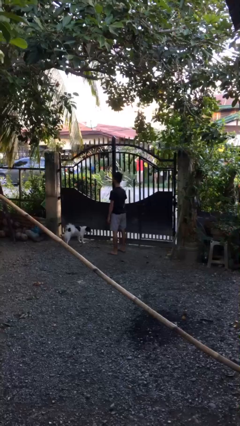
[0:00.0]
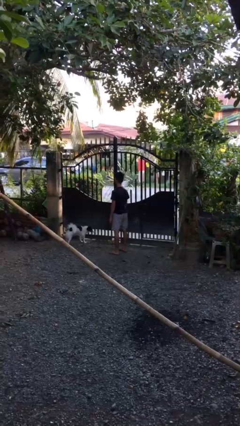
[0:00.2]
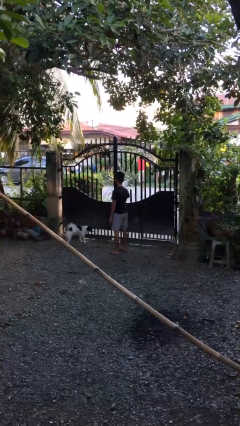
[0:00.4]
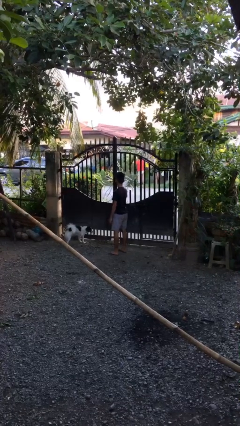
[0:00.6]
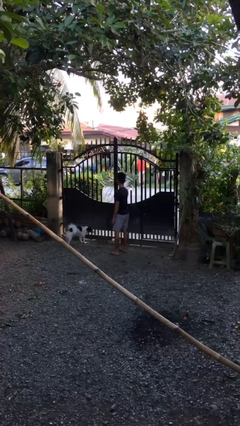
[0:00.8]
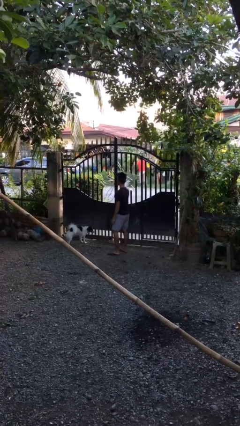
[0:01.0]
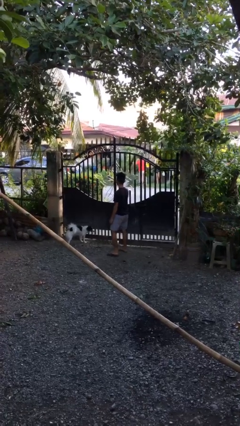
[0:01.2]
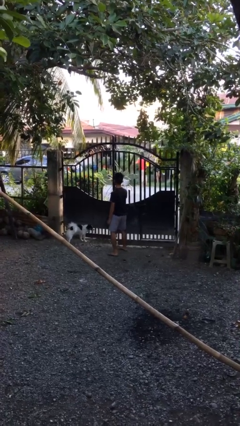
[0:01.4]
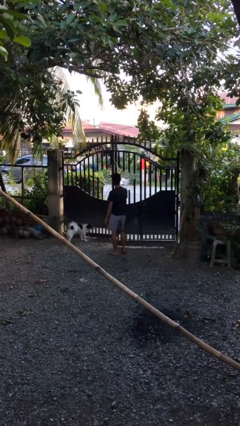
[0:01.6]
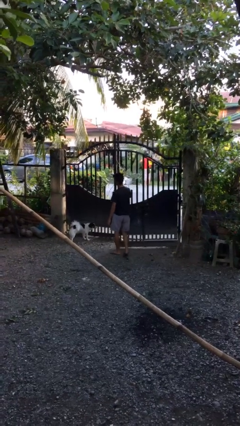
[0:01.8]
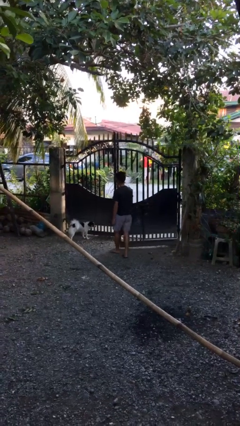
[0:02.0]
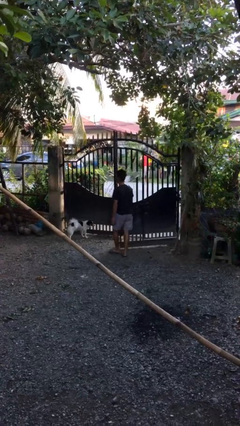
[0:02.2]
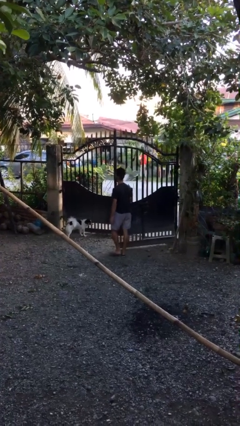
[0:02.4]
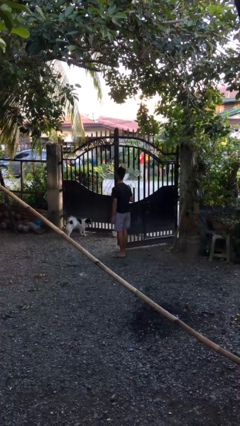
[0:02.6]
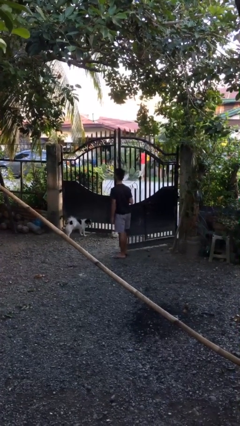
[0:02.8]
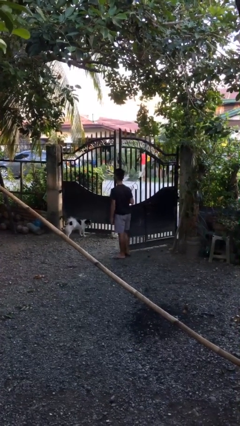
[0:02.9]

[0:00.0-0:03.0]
person opens gate

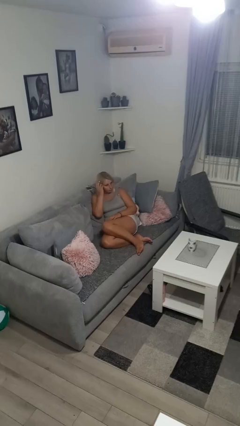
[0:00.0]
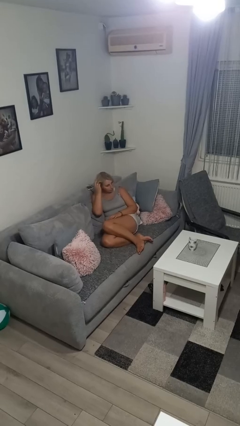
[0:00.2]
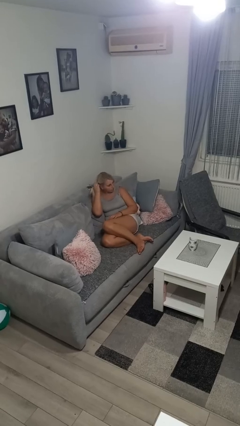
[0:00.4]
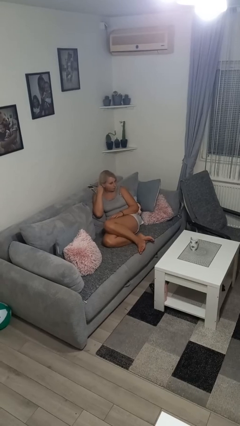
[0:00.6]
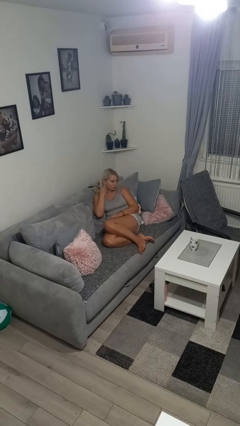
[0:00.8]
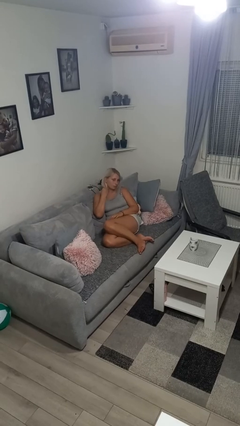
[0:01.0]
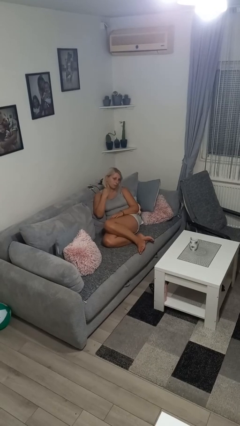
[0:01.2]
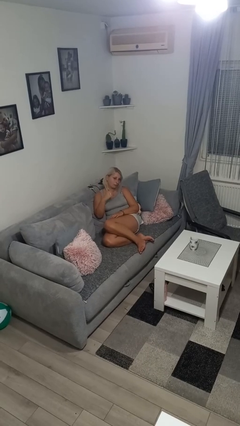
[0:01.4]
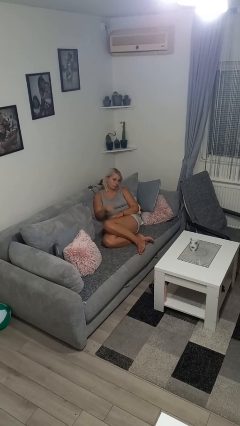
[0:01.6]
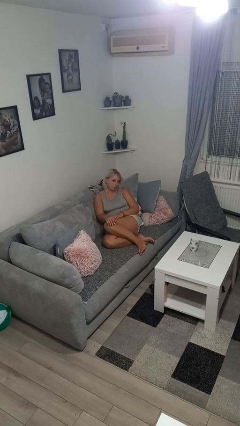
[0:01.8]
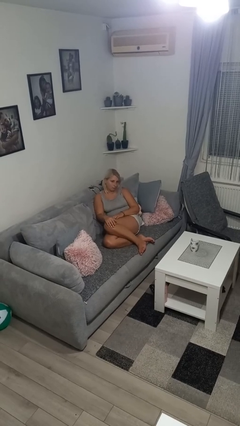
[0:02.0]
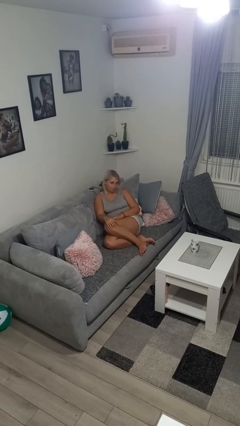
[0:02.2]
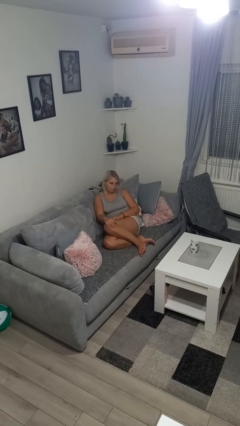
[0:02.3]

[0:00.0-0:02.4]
person strokes hair

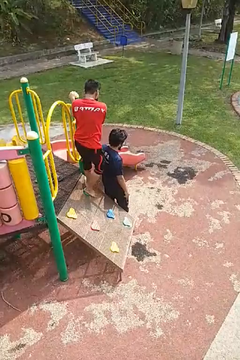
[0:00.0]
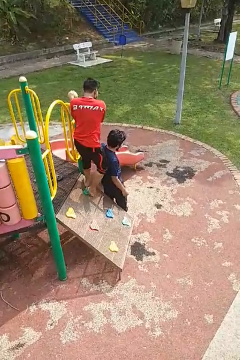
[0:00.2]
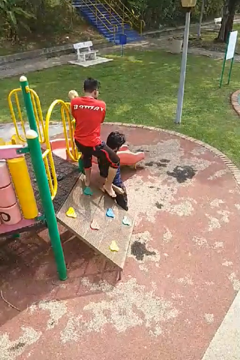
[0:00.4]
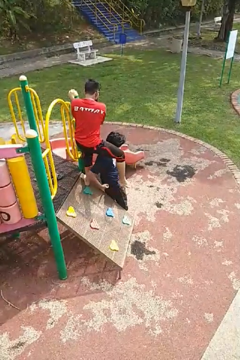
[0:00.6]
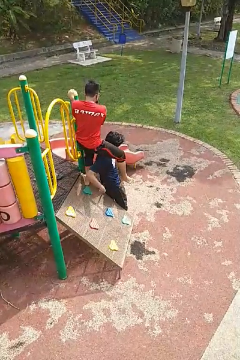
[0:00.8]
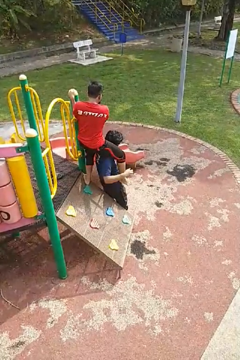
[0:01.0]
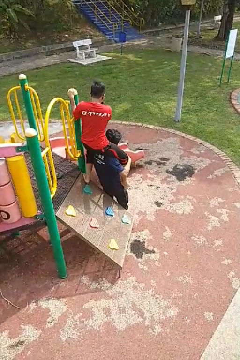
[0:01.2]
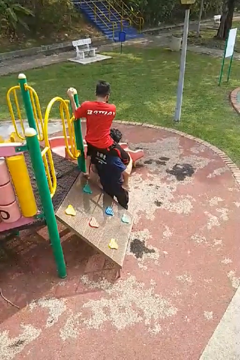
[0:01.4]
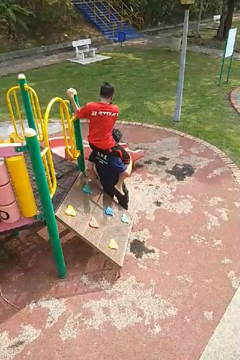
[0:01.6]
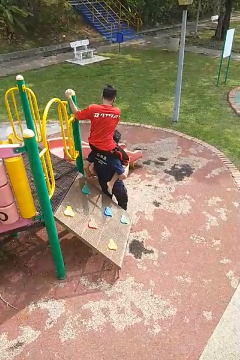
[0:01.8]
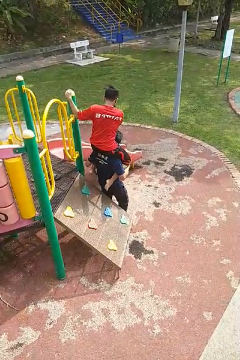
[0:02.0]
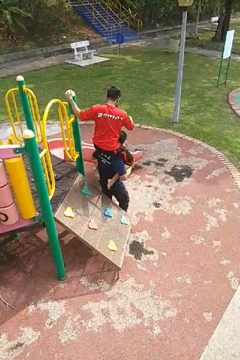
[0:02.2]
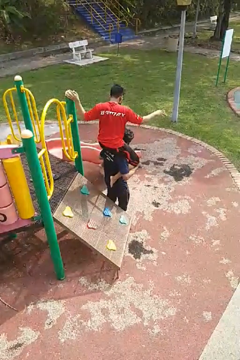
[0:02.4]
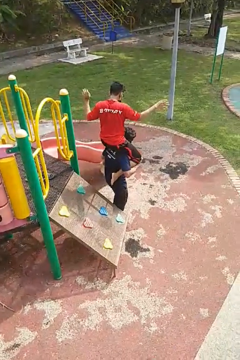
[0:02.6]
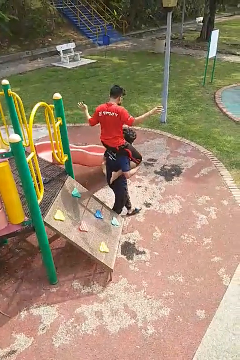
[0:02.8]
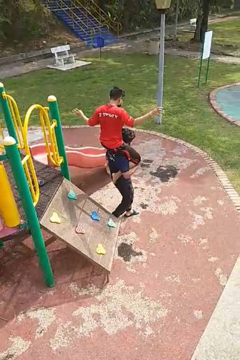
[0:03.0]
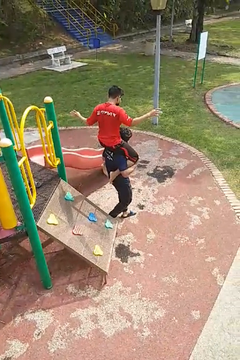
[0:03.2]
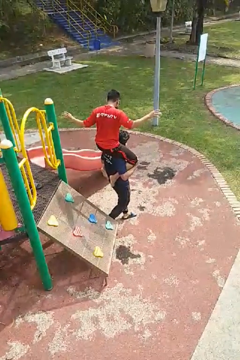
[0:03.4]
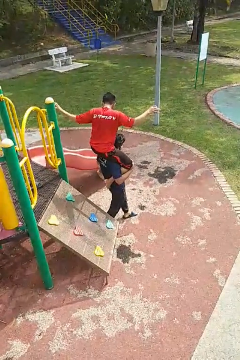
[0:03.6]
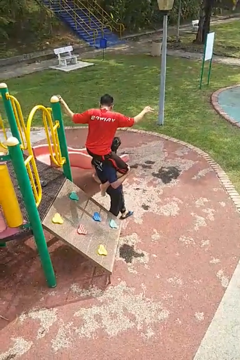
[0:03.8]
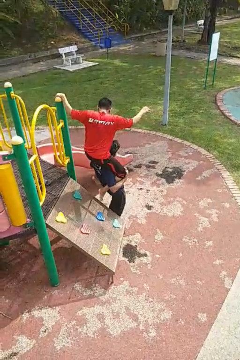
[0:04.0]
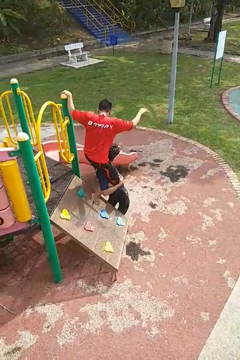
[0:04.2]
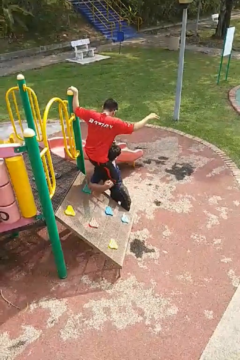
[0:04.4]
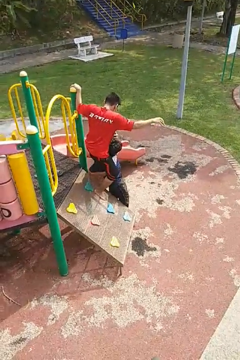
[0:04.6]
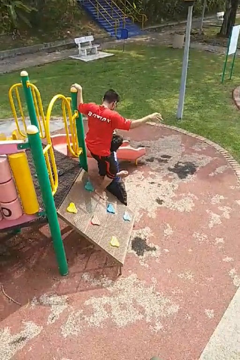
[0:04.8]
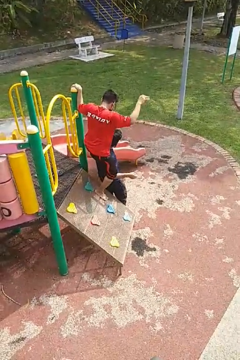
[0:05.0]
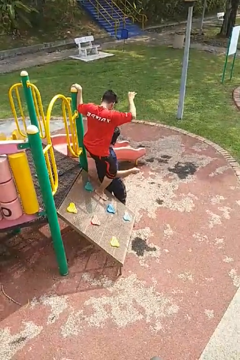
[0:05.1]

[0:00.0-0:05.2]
person carries person on shoulders

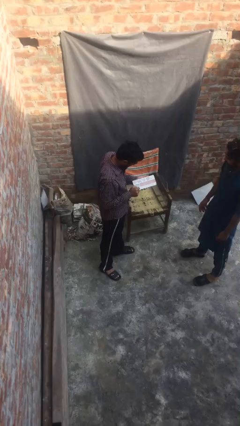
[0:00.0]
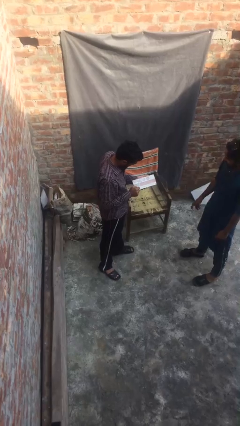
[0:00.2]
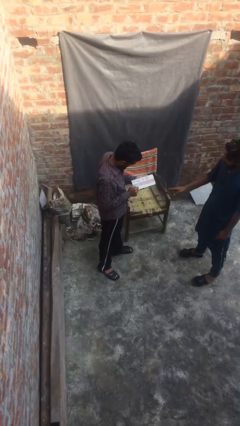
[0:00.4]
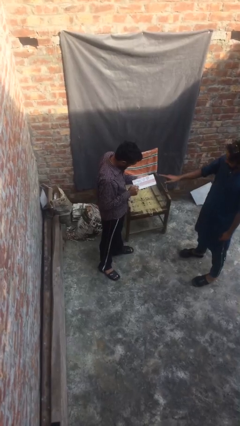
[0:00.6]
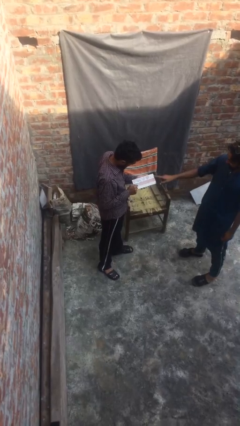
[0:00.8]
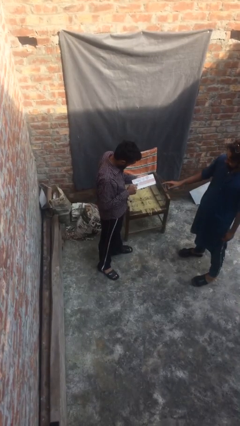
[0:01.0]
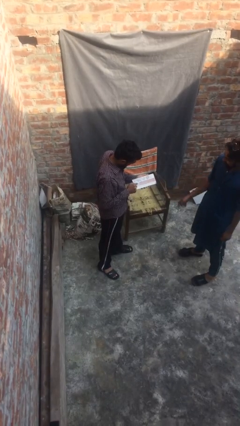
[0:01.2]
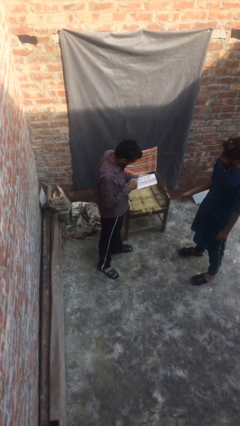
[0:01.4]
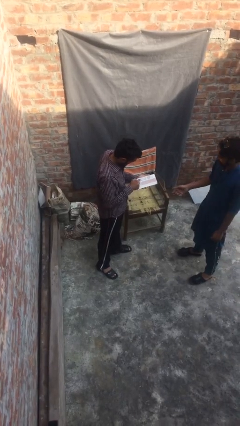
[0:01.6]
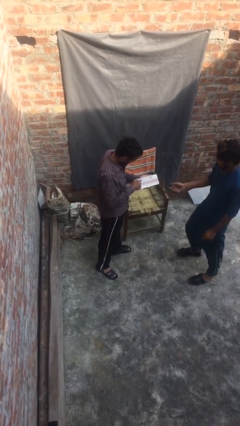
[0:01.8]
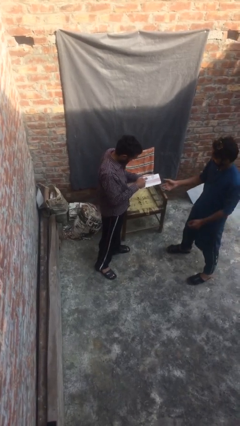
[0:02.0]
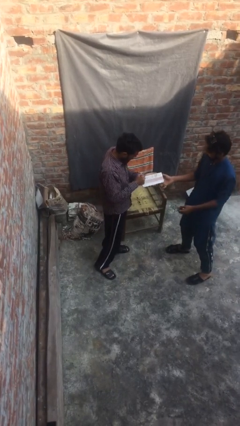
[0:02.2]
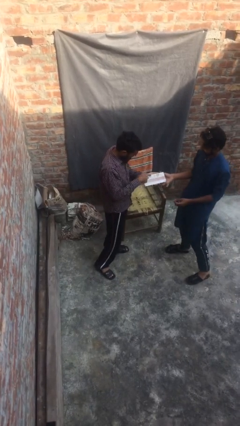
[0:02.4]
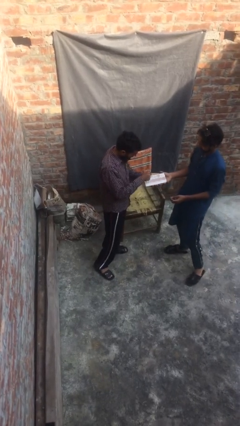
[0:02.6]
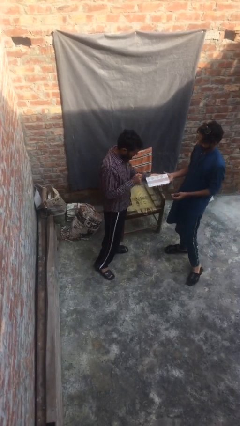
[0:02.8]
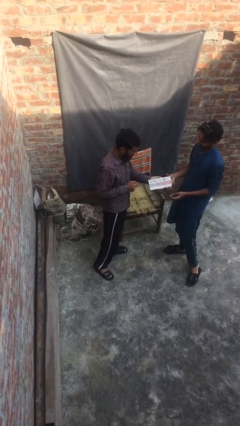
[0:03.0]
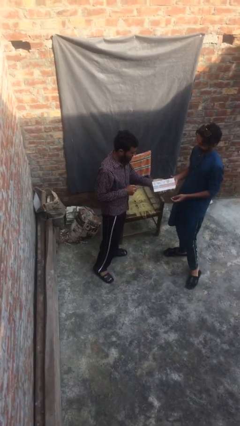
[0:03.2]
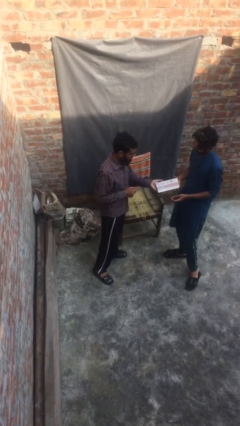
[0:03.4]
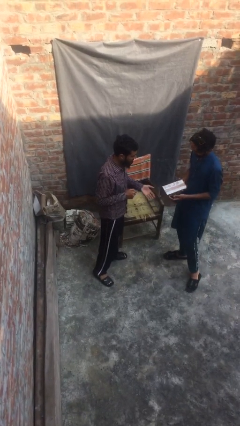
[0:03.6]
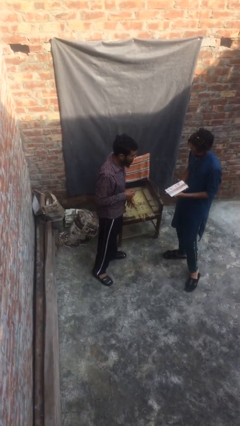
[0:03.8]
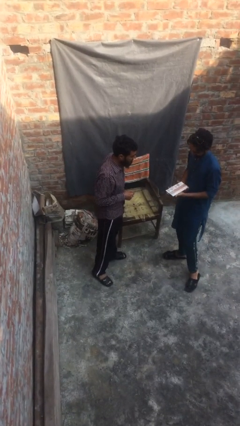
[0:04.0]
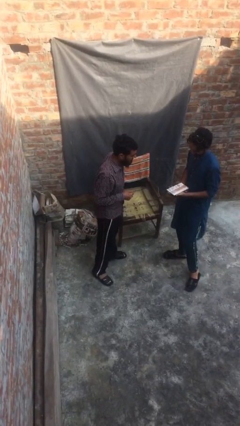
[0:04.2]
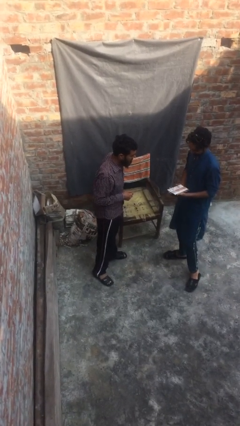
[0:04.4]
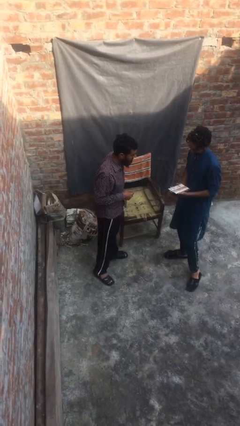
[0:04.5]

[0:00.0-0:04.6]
person transfers object to person

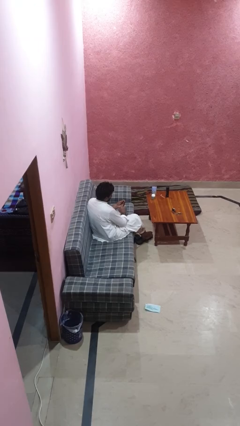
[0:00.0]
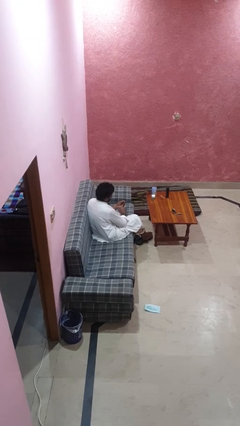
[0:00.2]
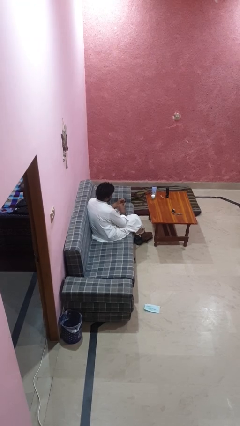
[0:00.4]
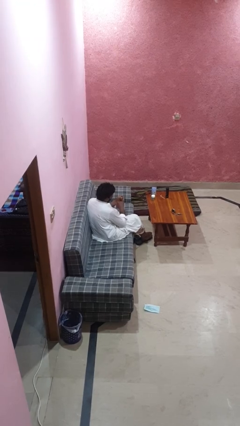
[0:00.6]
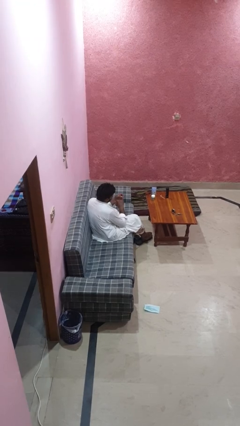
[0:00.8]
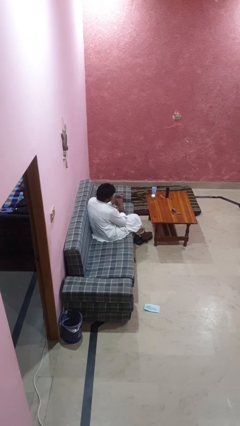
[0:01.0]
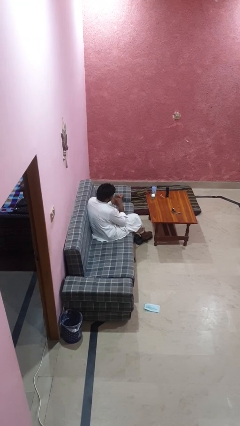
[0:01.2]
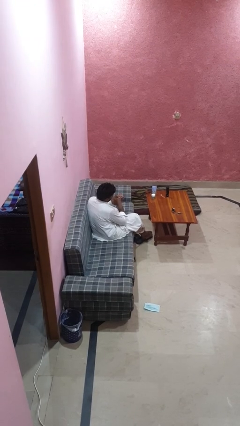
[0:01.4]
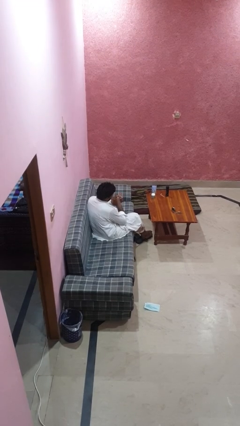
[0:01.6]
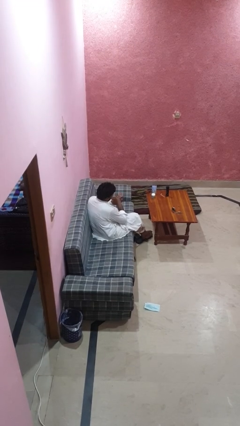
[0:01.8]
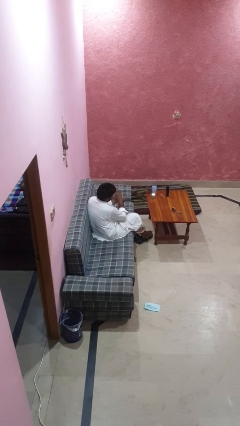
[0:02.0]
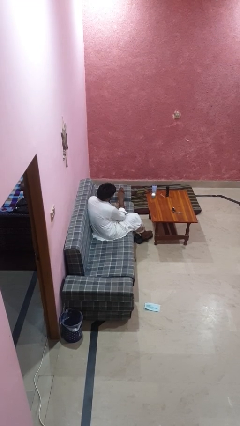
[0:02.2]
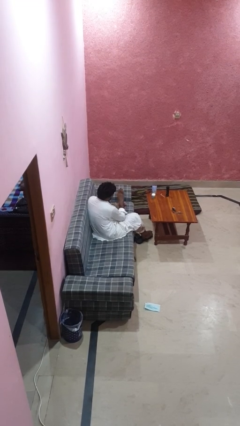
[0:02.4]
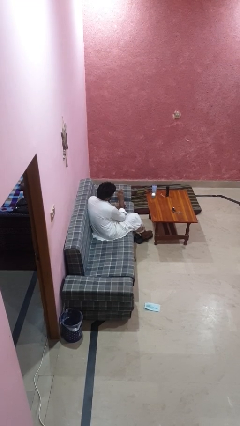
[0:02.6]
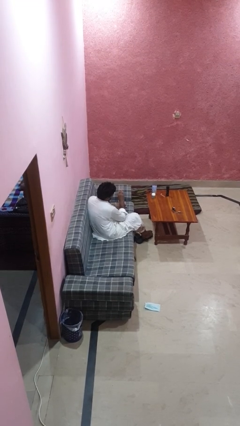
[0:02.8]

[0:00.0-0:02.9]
person puts on ring

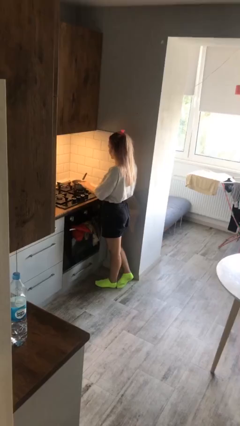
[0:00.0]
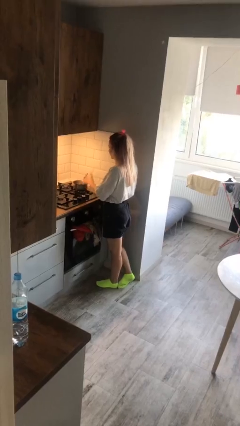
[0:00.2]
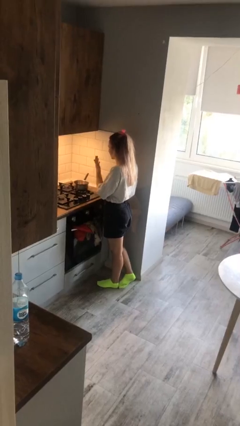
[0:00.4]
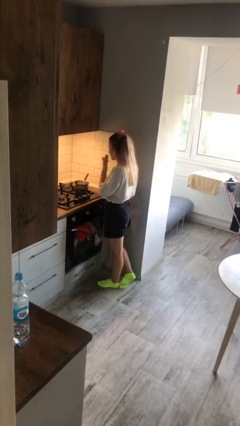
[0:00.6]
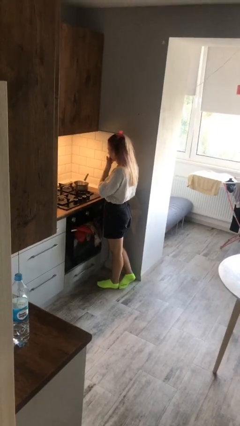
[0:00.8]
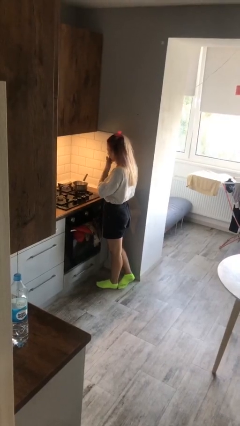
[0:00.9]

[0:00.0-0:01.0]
person burns hand
